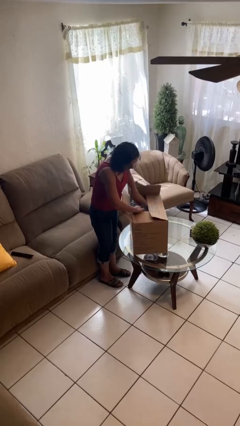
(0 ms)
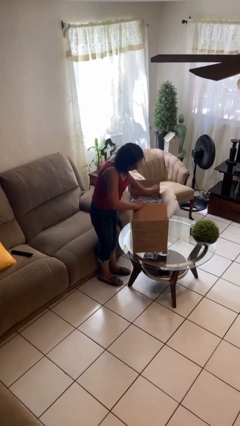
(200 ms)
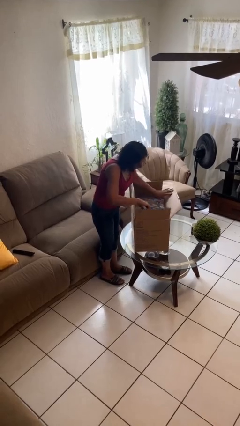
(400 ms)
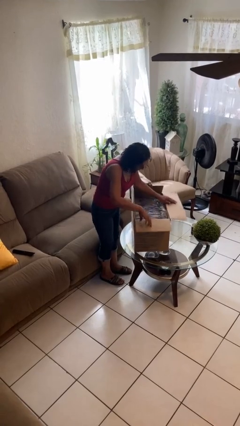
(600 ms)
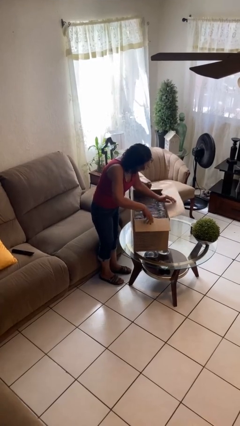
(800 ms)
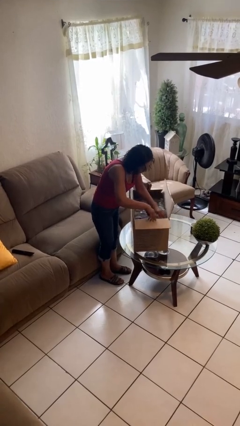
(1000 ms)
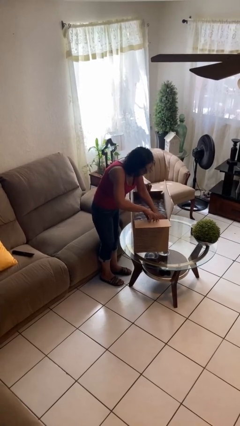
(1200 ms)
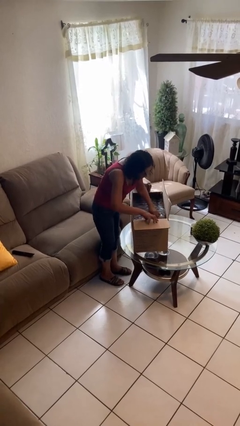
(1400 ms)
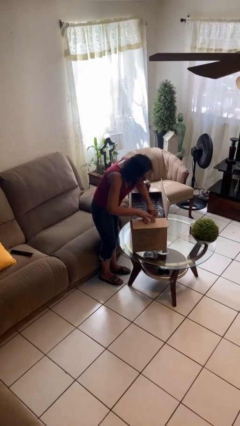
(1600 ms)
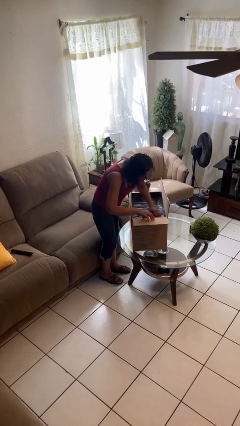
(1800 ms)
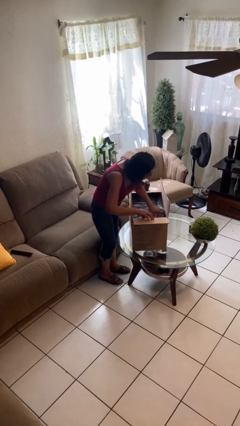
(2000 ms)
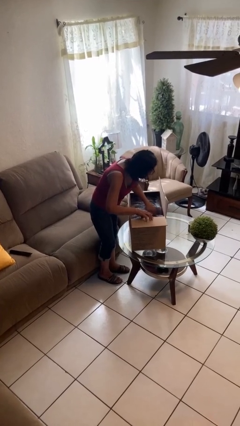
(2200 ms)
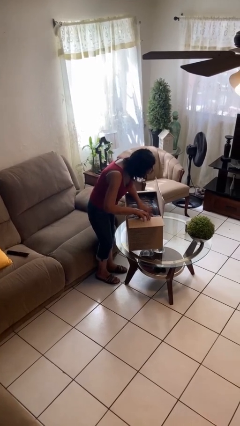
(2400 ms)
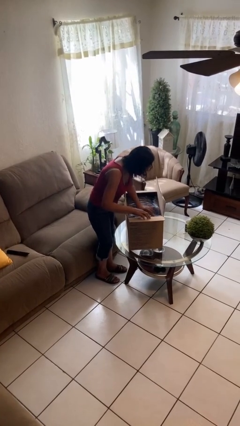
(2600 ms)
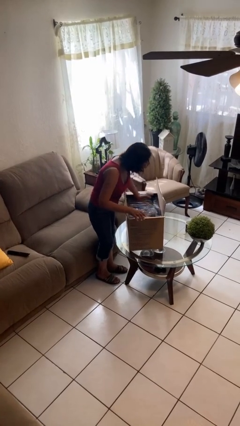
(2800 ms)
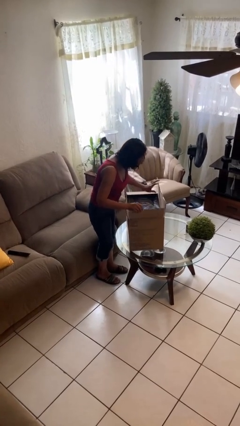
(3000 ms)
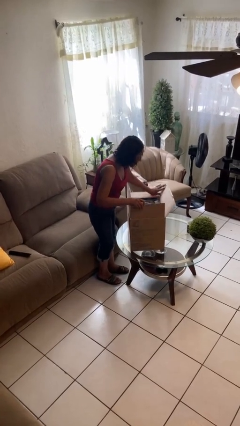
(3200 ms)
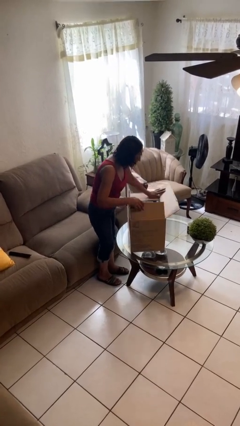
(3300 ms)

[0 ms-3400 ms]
person searches in box

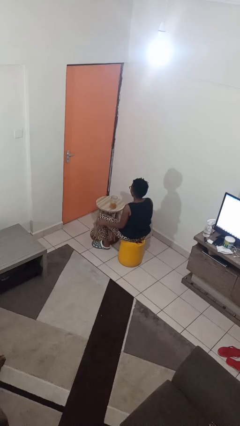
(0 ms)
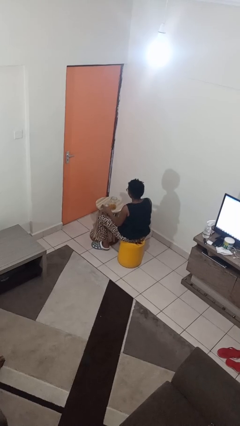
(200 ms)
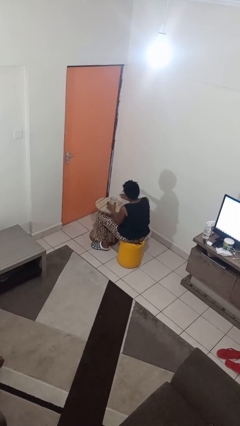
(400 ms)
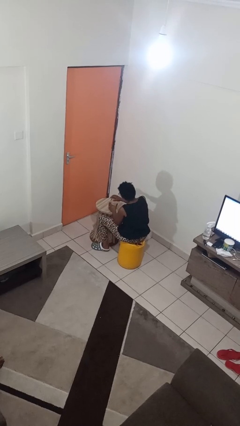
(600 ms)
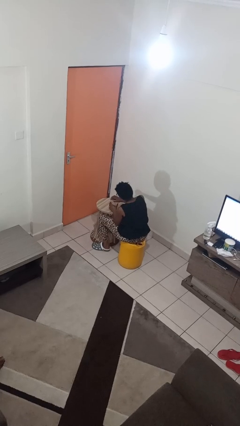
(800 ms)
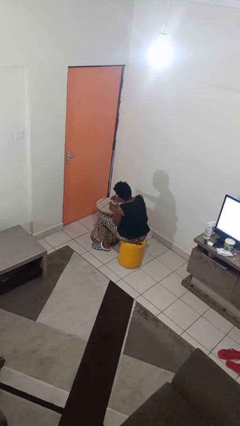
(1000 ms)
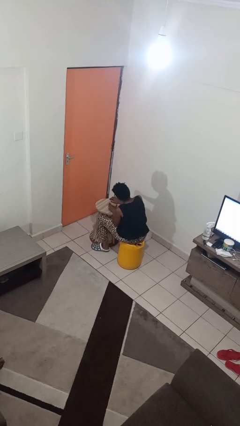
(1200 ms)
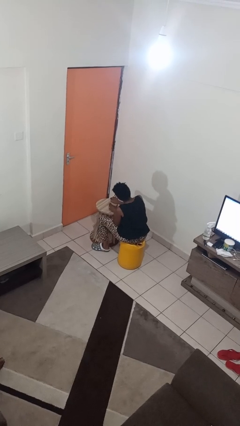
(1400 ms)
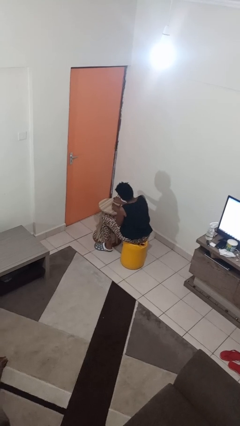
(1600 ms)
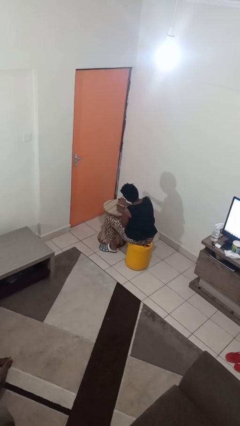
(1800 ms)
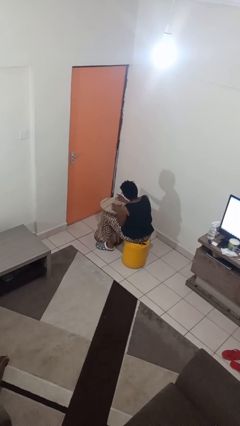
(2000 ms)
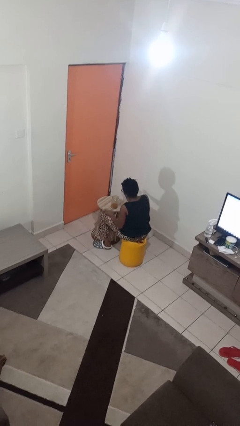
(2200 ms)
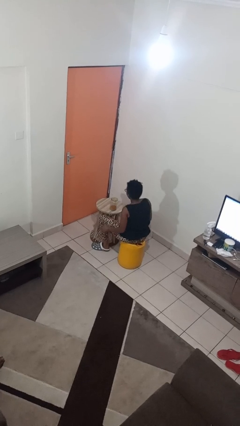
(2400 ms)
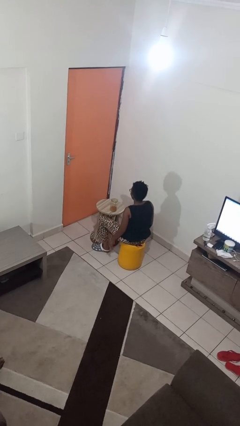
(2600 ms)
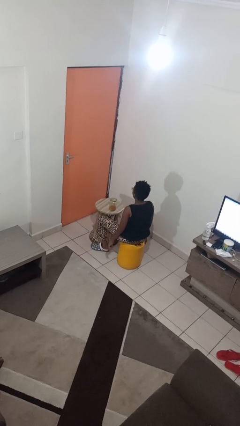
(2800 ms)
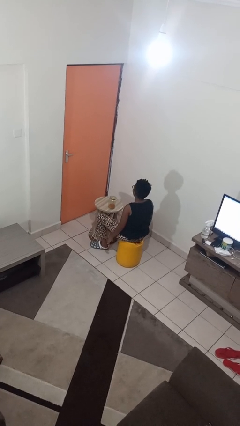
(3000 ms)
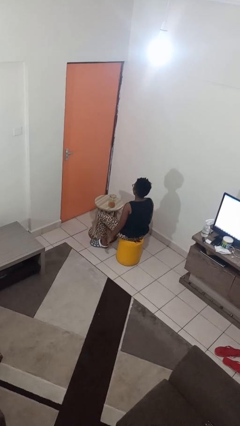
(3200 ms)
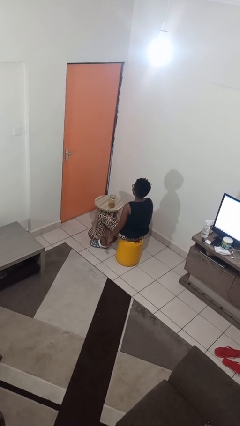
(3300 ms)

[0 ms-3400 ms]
person closes jar

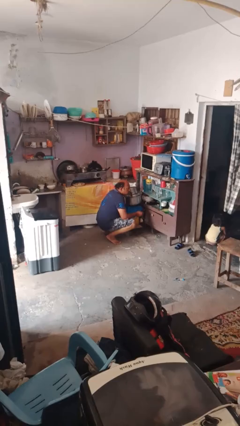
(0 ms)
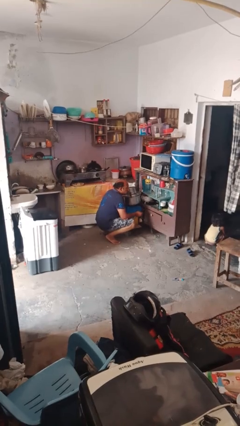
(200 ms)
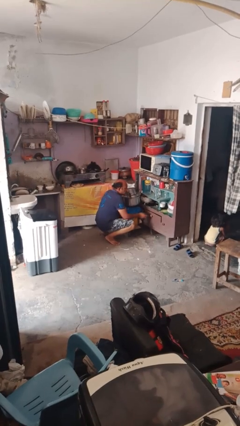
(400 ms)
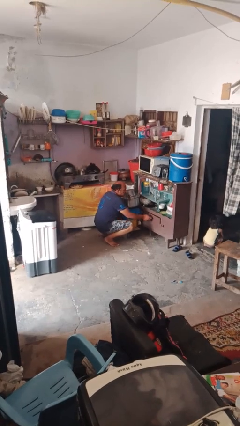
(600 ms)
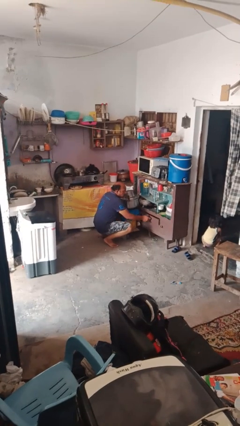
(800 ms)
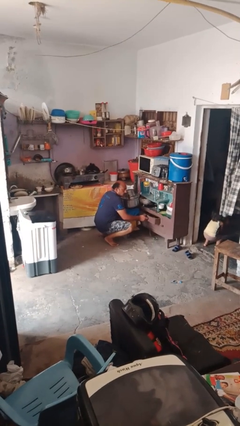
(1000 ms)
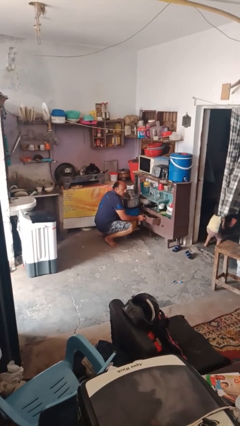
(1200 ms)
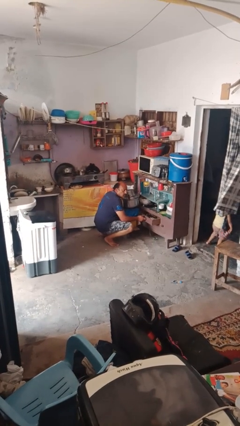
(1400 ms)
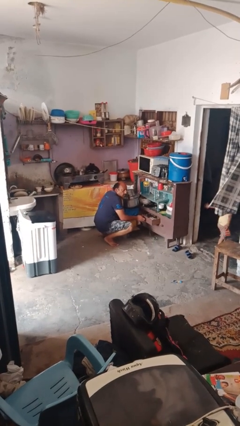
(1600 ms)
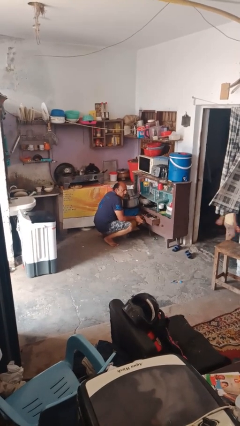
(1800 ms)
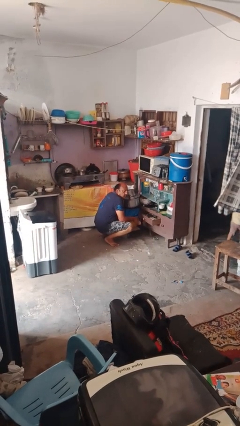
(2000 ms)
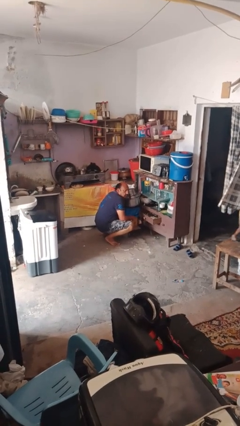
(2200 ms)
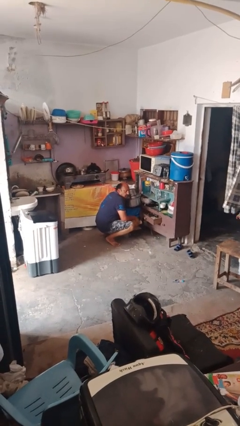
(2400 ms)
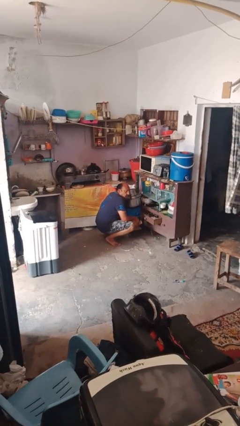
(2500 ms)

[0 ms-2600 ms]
person opens kitchen drawer

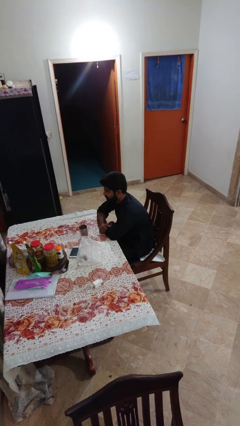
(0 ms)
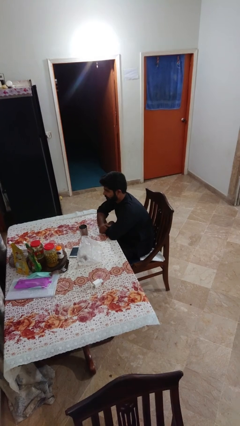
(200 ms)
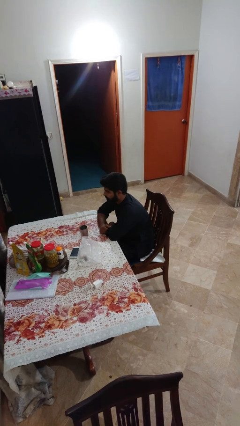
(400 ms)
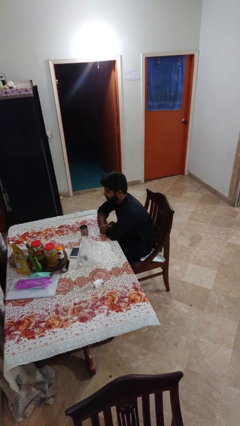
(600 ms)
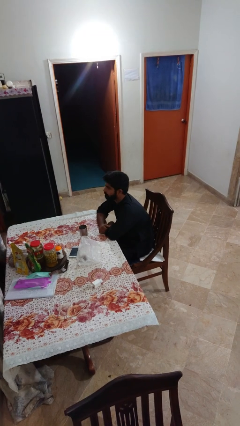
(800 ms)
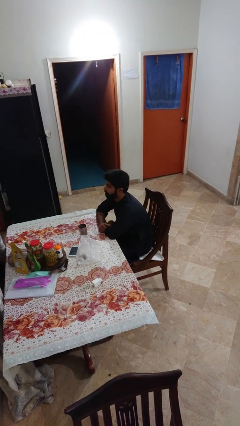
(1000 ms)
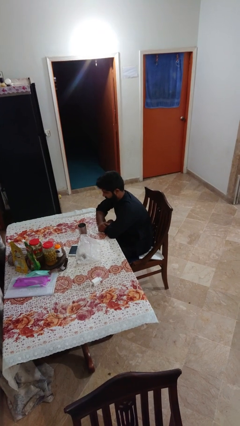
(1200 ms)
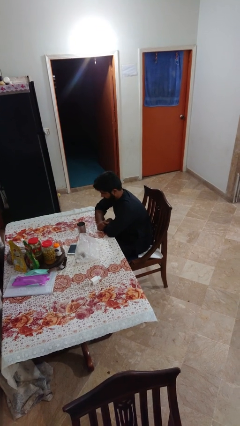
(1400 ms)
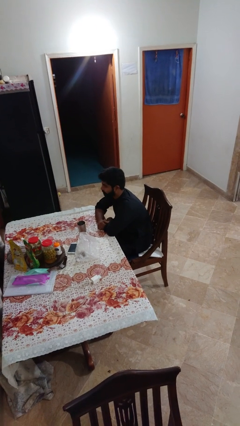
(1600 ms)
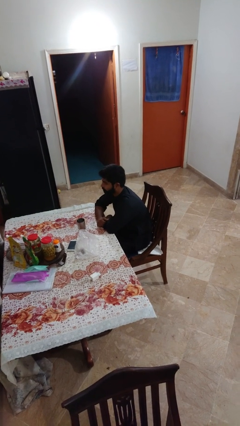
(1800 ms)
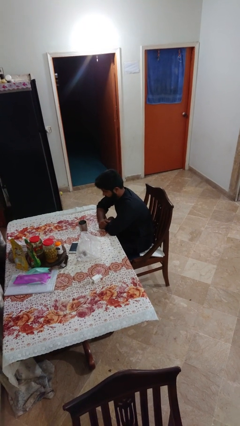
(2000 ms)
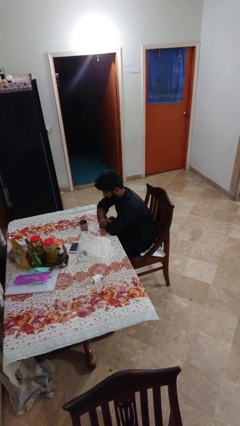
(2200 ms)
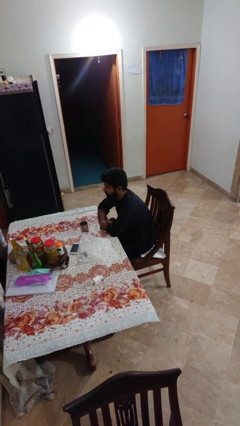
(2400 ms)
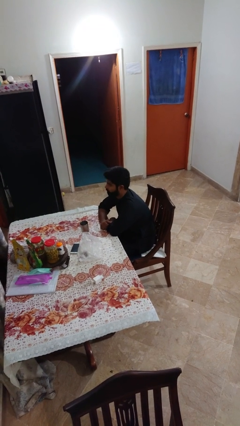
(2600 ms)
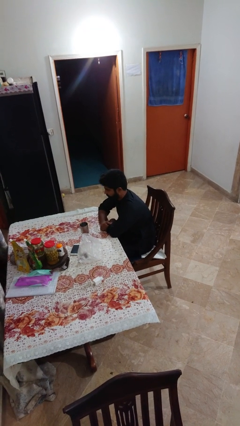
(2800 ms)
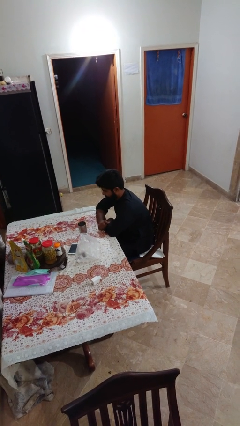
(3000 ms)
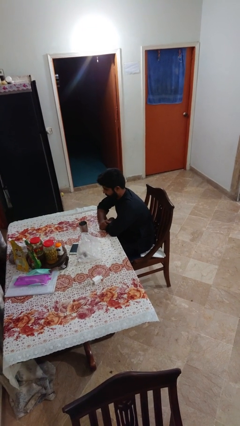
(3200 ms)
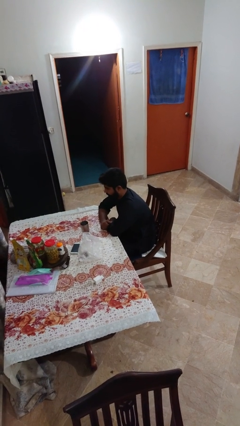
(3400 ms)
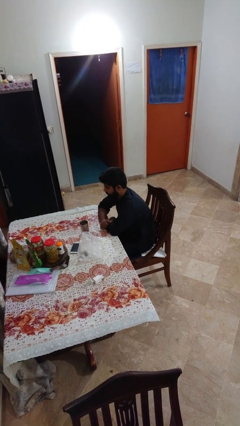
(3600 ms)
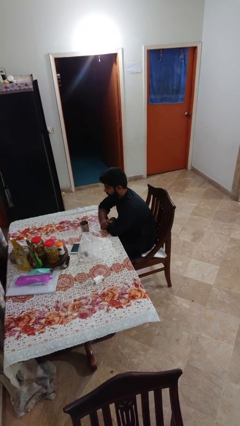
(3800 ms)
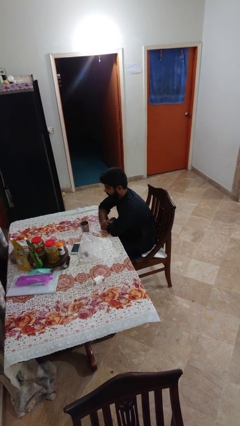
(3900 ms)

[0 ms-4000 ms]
person nods head

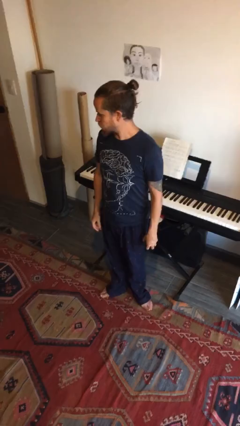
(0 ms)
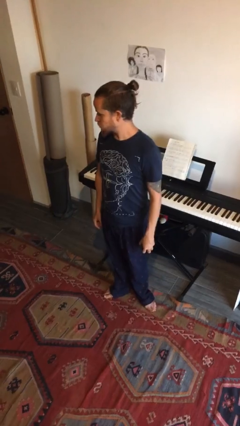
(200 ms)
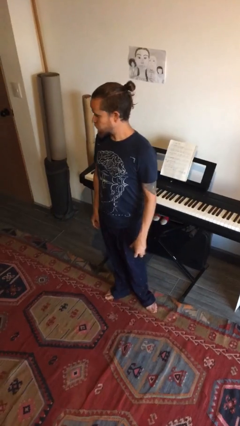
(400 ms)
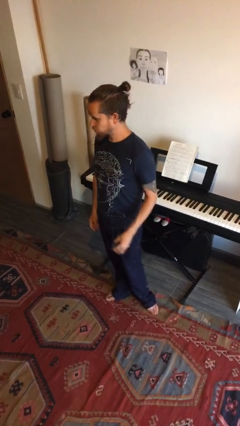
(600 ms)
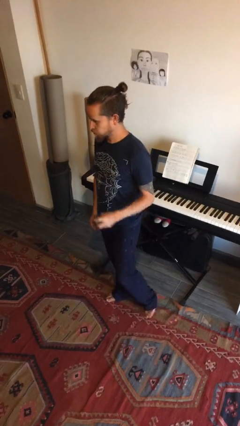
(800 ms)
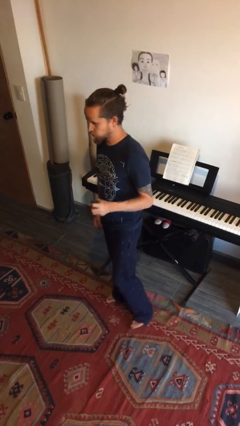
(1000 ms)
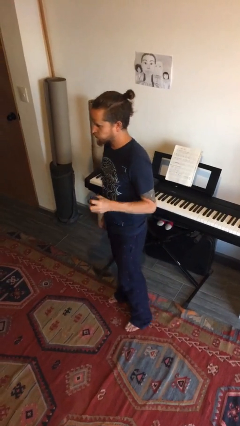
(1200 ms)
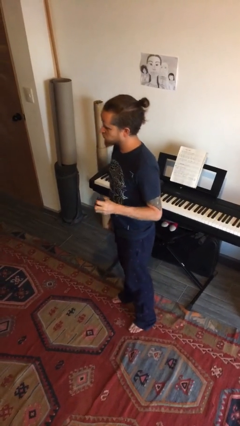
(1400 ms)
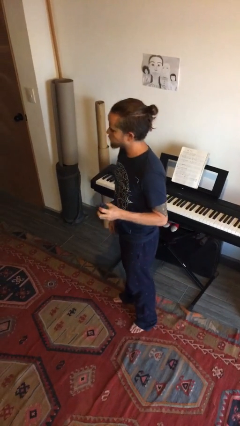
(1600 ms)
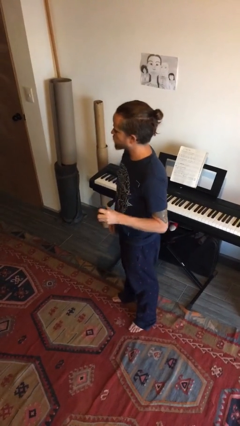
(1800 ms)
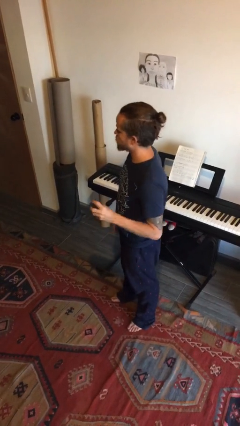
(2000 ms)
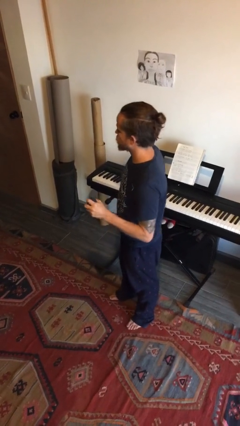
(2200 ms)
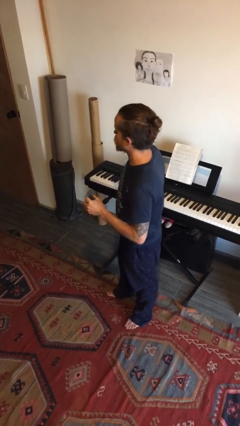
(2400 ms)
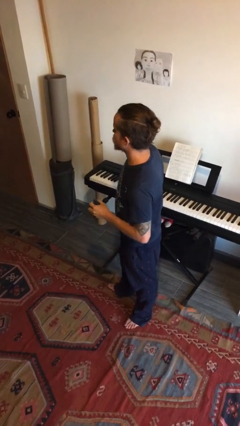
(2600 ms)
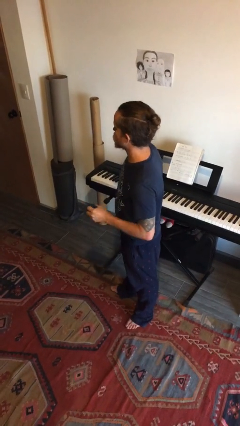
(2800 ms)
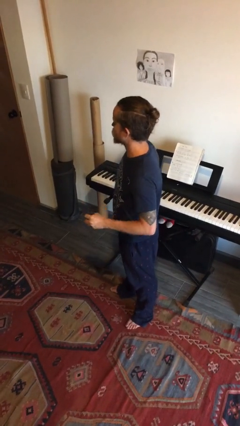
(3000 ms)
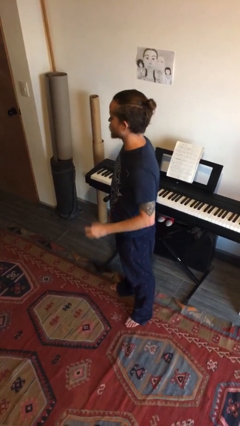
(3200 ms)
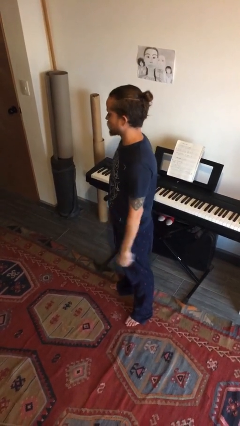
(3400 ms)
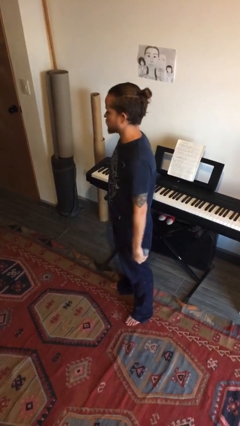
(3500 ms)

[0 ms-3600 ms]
person squeezes object

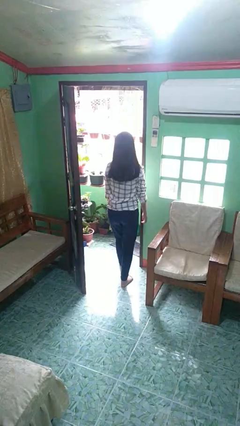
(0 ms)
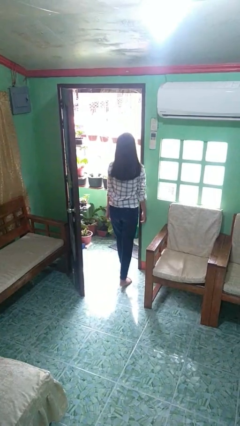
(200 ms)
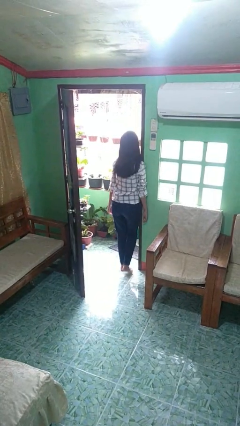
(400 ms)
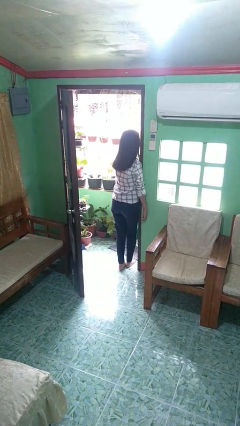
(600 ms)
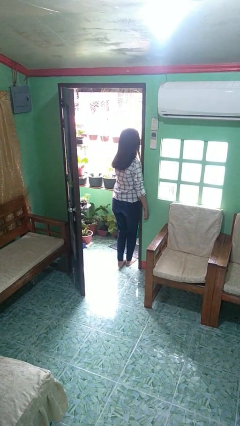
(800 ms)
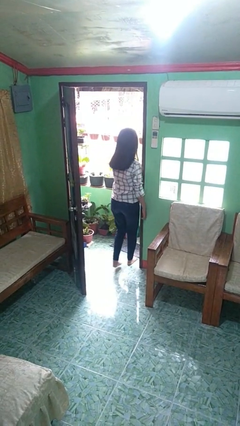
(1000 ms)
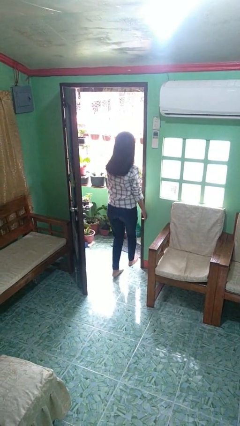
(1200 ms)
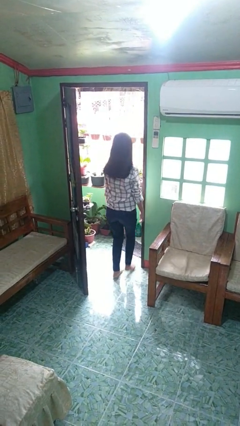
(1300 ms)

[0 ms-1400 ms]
person bumps into wall
